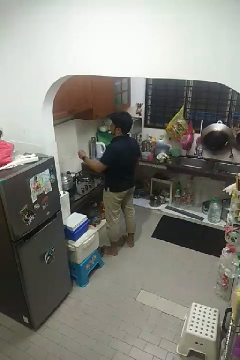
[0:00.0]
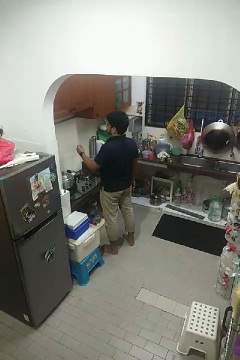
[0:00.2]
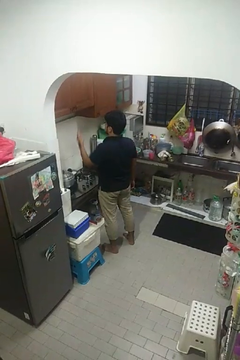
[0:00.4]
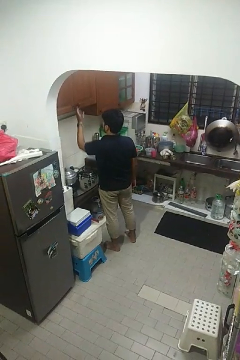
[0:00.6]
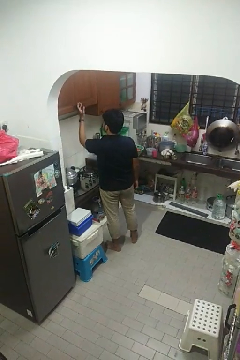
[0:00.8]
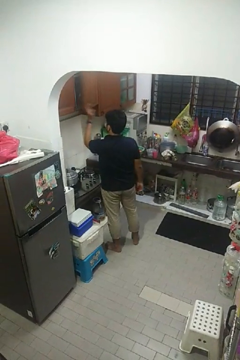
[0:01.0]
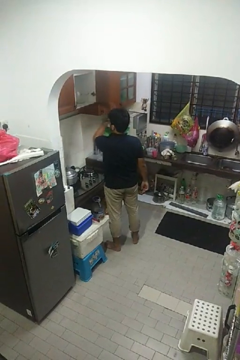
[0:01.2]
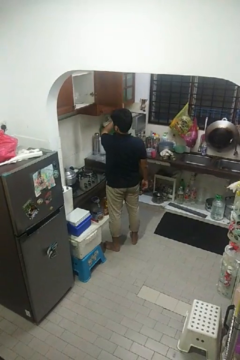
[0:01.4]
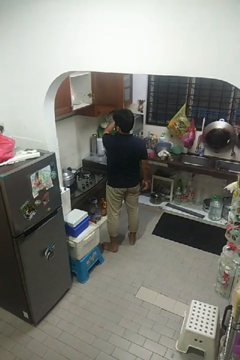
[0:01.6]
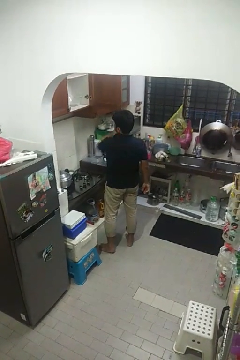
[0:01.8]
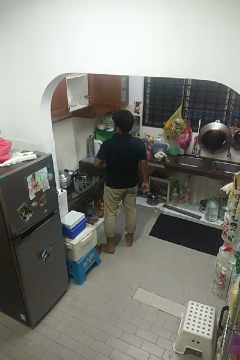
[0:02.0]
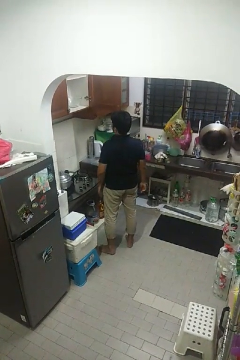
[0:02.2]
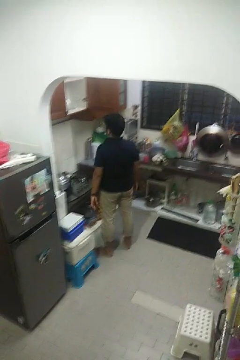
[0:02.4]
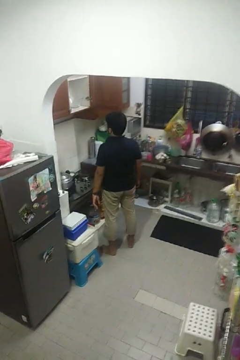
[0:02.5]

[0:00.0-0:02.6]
person opens cabinet

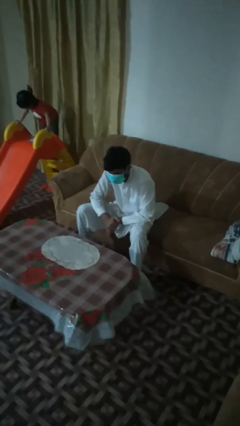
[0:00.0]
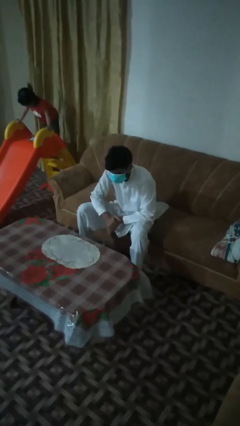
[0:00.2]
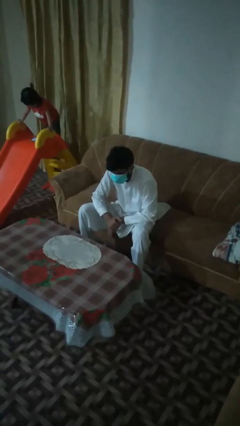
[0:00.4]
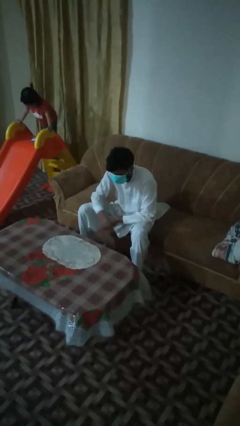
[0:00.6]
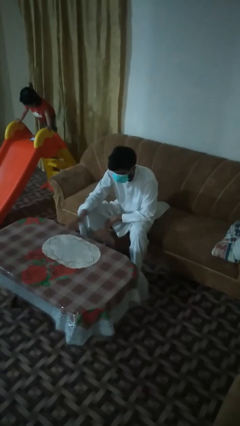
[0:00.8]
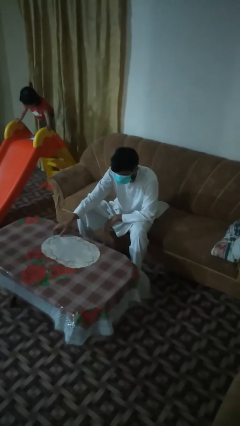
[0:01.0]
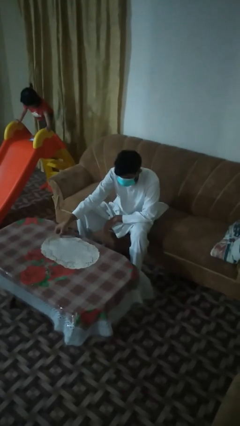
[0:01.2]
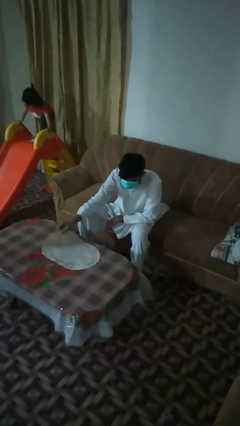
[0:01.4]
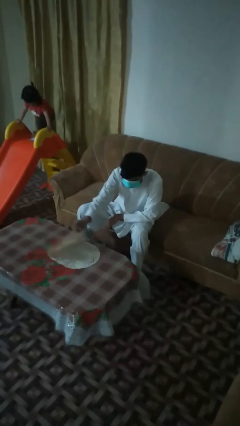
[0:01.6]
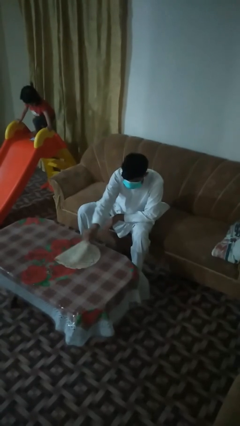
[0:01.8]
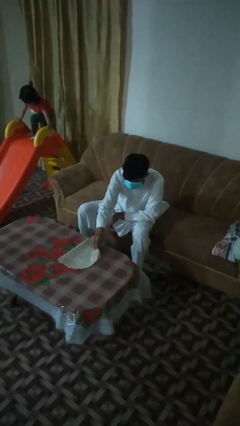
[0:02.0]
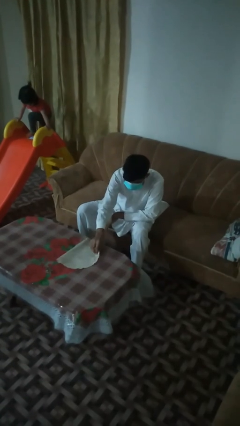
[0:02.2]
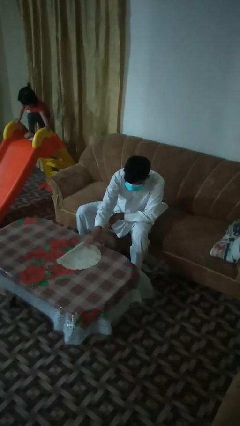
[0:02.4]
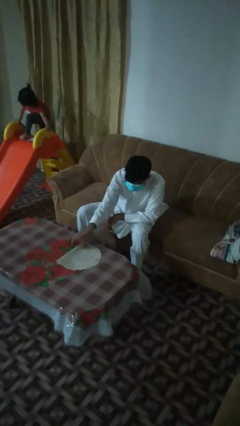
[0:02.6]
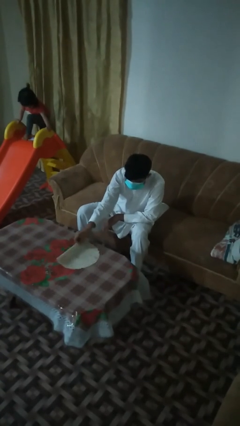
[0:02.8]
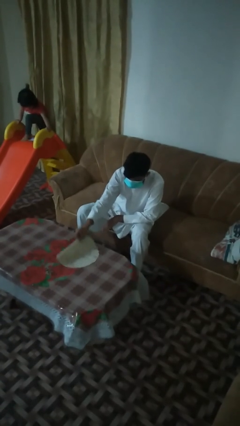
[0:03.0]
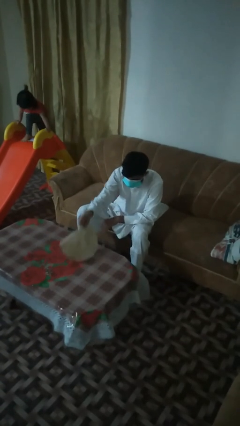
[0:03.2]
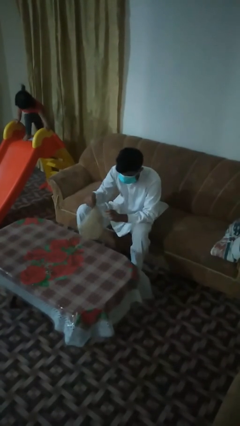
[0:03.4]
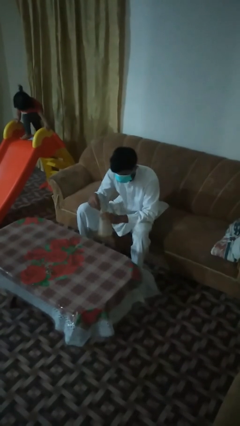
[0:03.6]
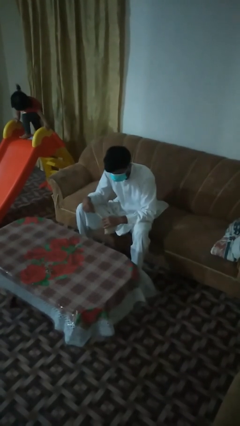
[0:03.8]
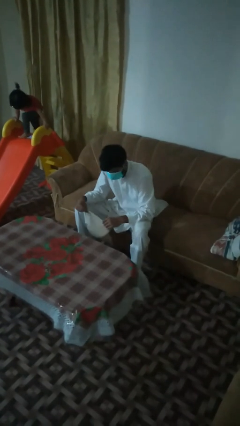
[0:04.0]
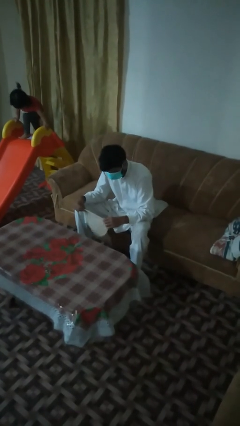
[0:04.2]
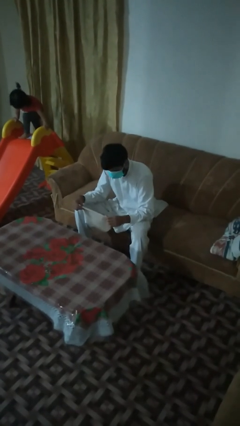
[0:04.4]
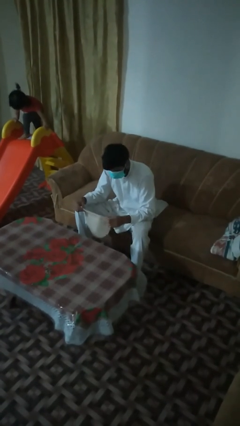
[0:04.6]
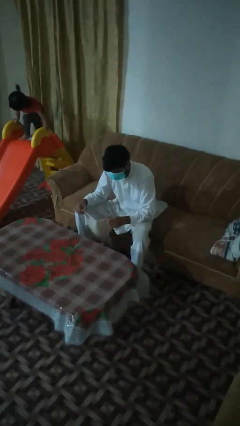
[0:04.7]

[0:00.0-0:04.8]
person folds tablecloth

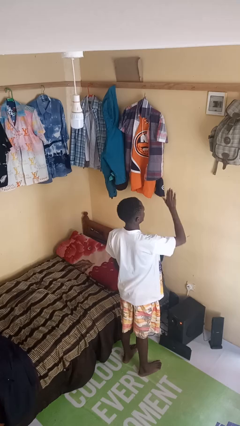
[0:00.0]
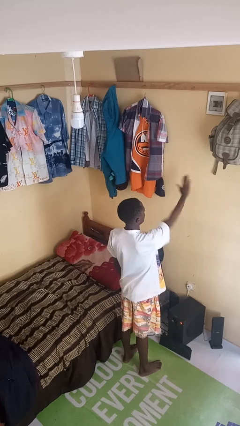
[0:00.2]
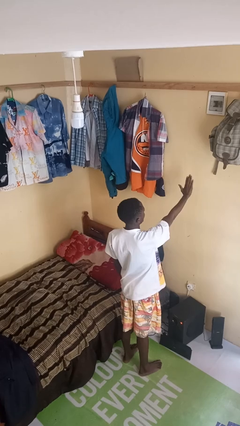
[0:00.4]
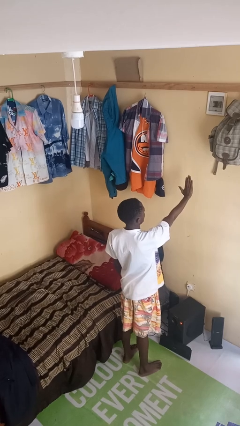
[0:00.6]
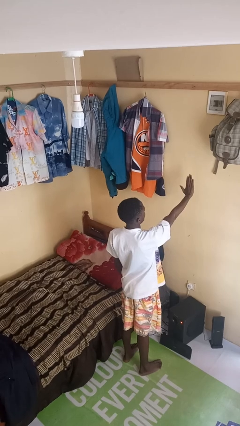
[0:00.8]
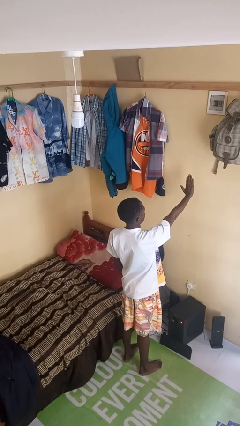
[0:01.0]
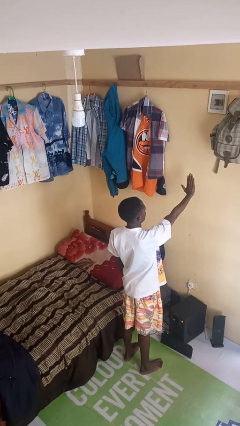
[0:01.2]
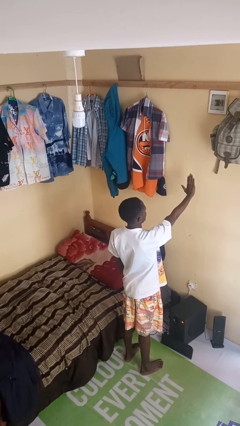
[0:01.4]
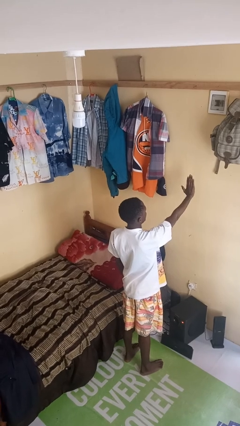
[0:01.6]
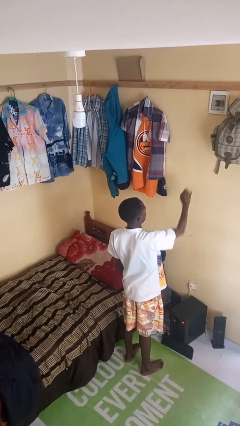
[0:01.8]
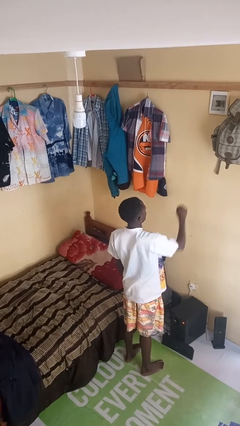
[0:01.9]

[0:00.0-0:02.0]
person gestures stop

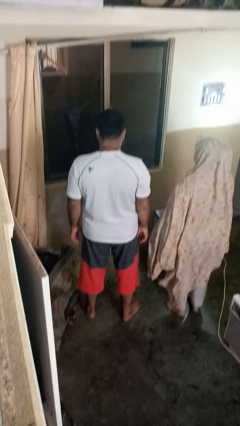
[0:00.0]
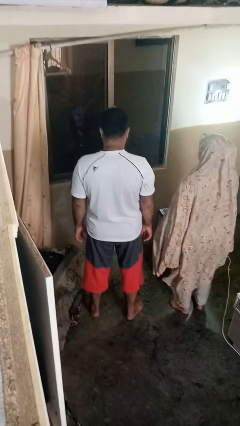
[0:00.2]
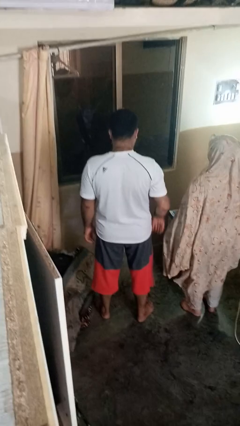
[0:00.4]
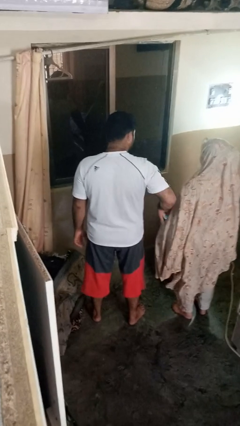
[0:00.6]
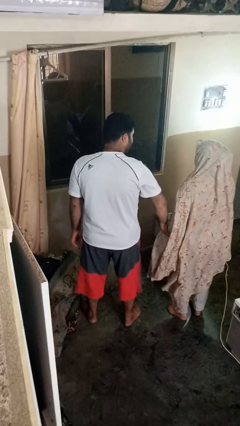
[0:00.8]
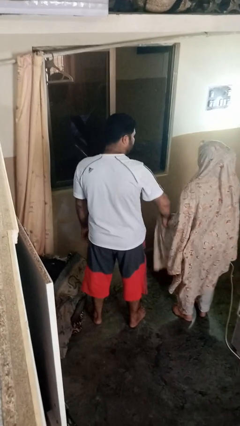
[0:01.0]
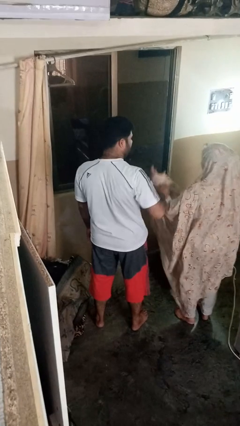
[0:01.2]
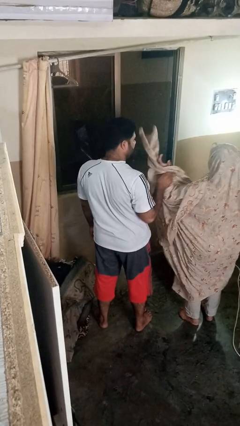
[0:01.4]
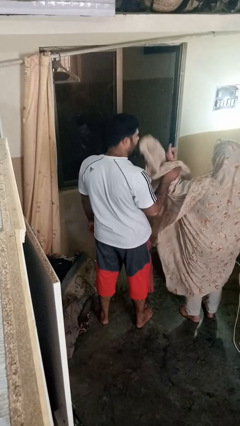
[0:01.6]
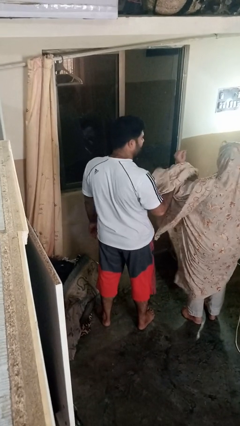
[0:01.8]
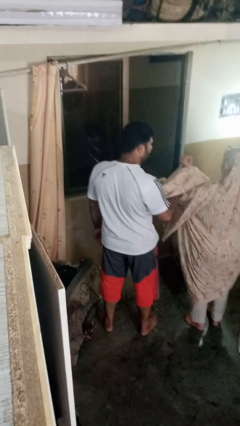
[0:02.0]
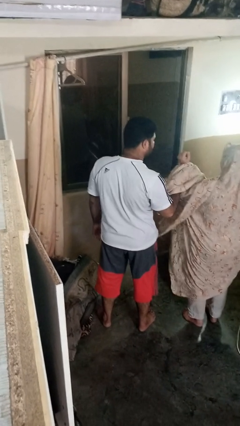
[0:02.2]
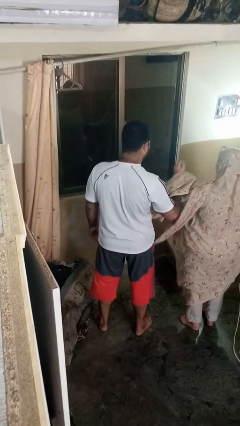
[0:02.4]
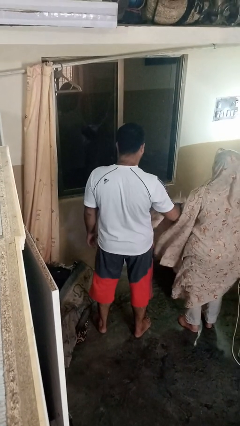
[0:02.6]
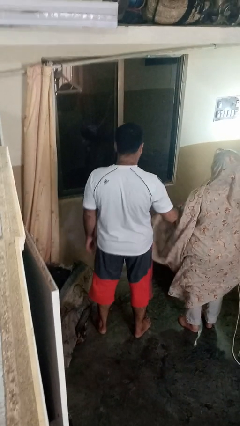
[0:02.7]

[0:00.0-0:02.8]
person grabs person by forearm

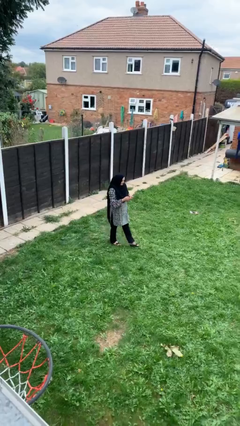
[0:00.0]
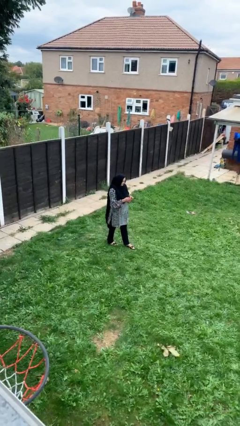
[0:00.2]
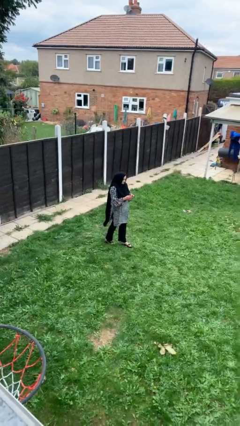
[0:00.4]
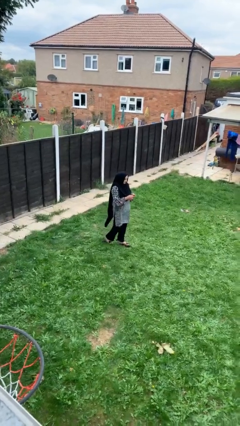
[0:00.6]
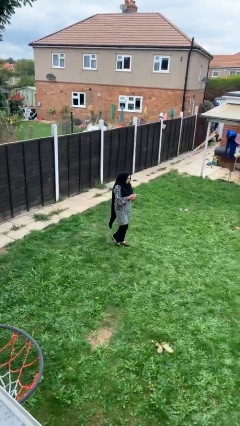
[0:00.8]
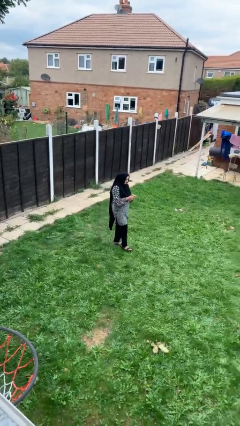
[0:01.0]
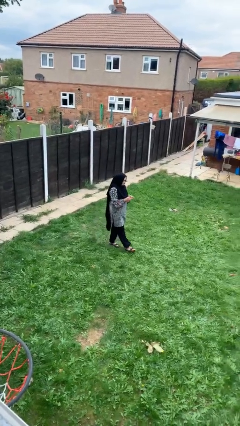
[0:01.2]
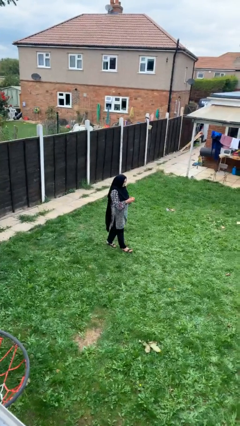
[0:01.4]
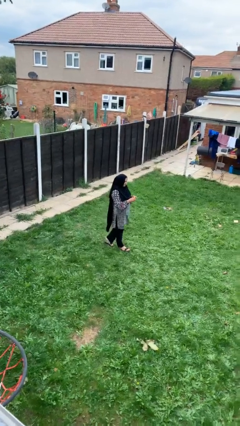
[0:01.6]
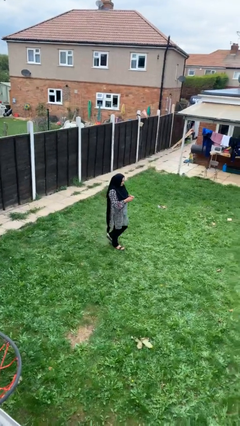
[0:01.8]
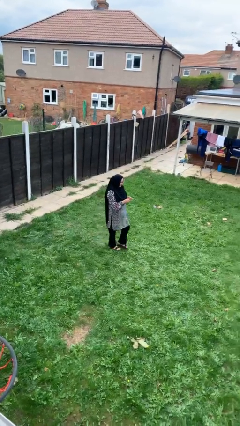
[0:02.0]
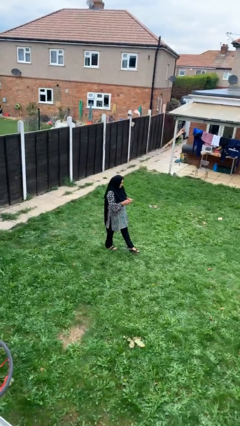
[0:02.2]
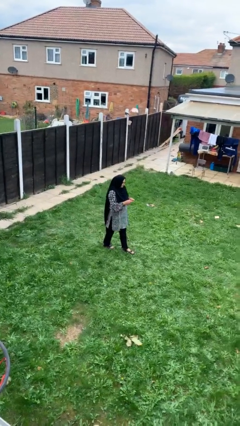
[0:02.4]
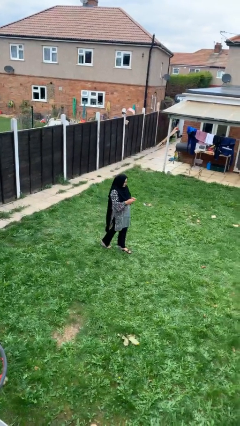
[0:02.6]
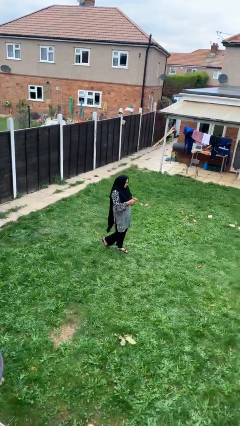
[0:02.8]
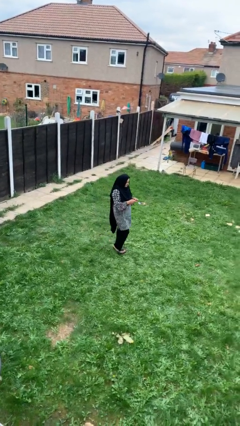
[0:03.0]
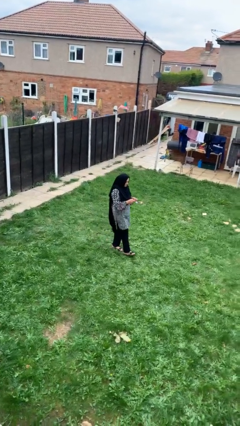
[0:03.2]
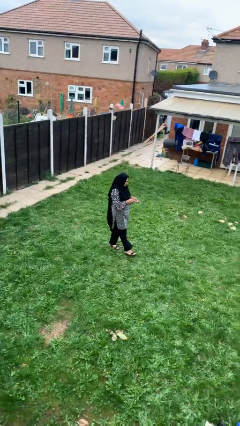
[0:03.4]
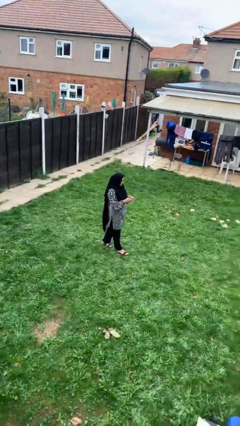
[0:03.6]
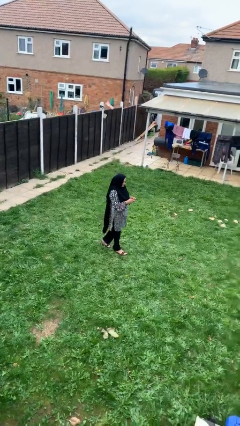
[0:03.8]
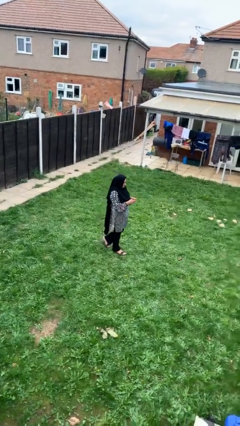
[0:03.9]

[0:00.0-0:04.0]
person texts on phone

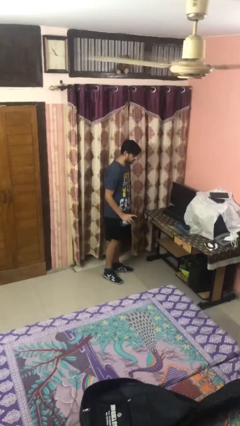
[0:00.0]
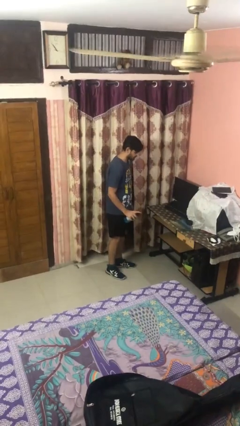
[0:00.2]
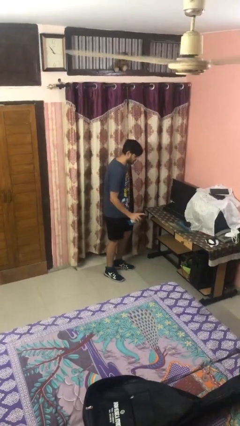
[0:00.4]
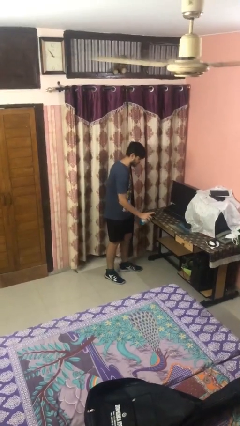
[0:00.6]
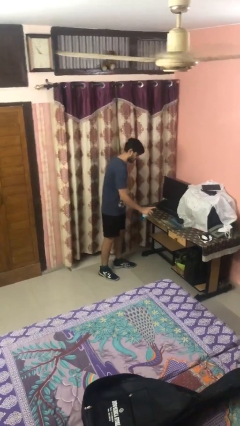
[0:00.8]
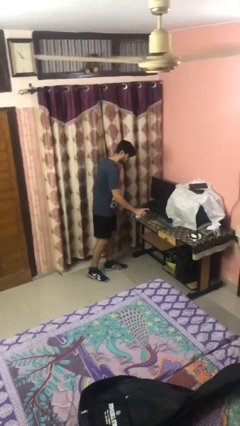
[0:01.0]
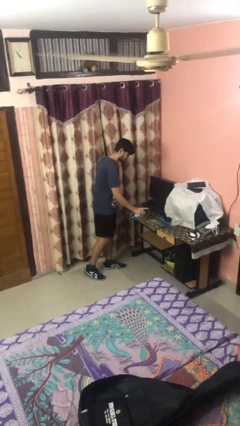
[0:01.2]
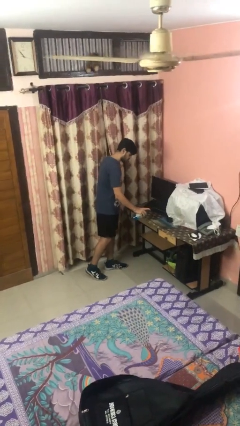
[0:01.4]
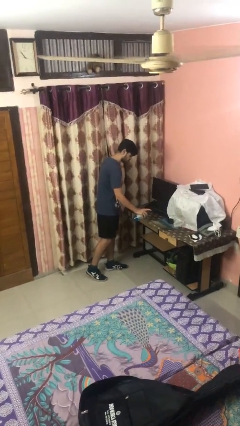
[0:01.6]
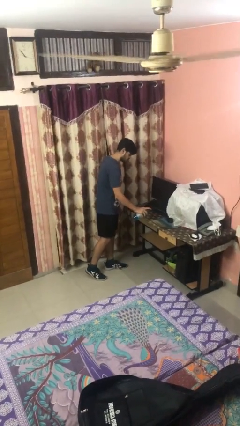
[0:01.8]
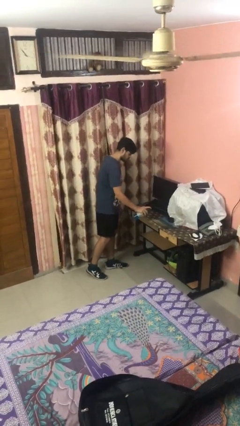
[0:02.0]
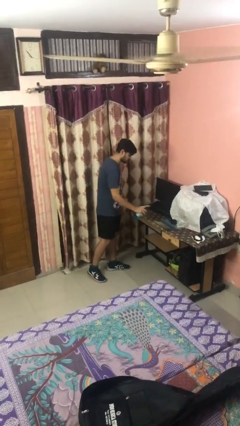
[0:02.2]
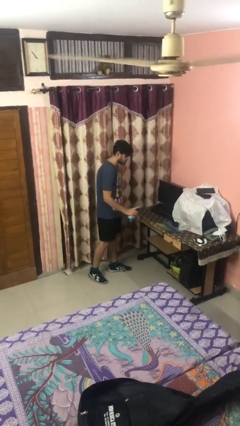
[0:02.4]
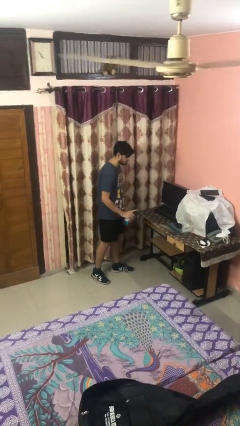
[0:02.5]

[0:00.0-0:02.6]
person sprays from bottle
